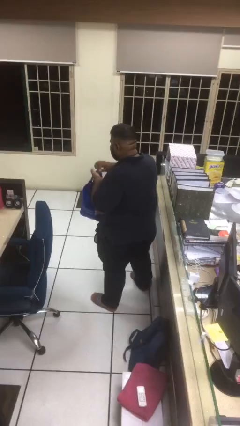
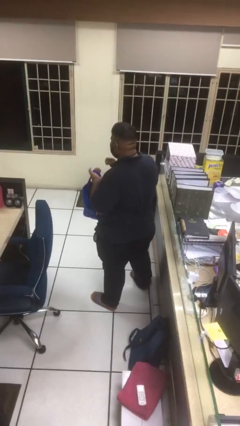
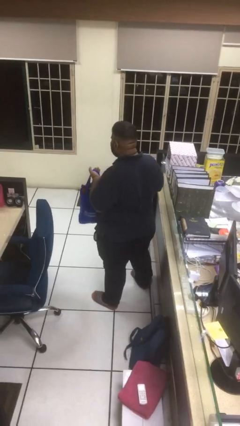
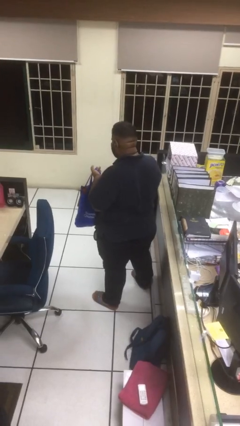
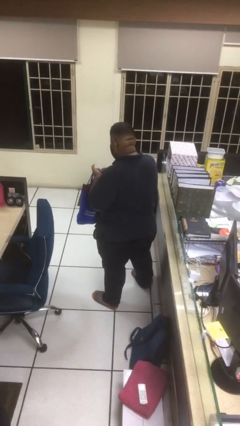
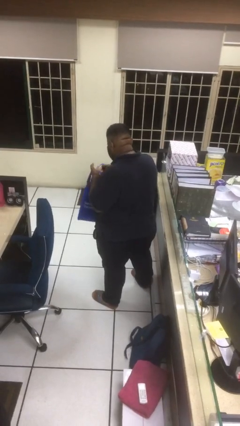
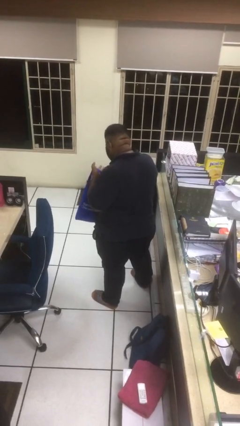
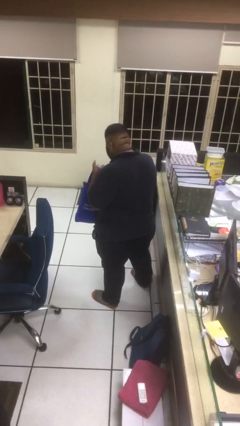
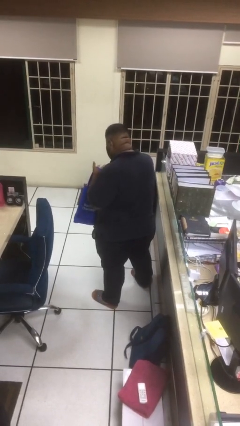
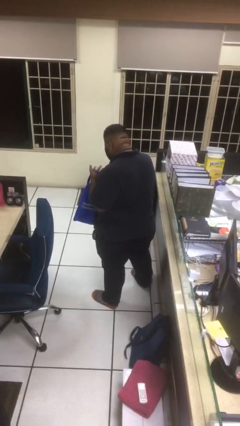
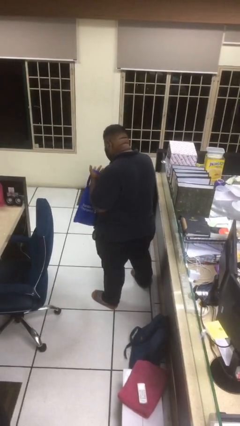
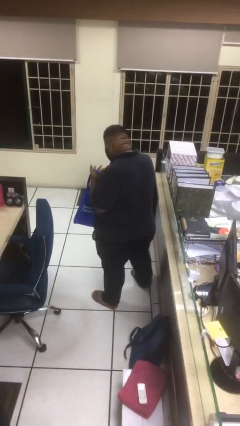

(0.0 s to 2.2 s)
person searches in bag

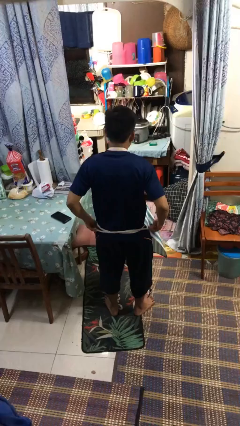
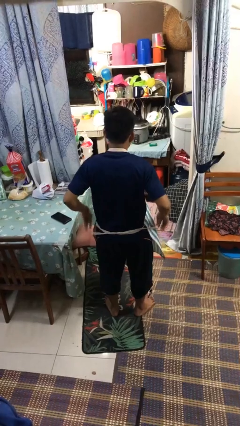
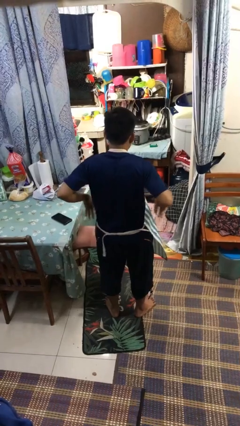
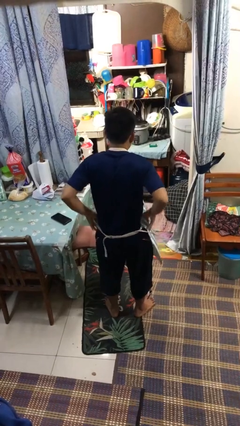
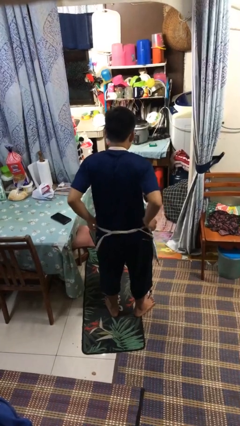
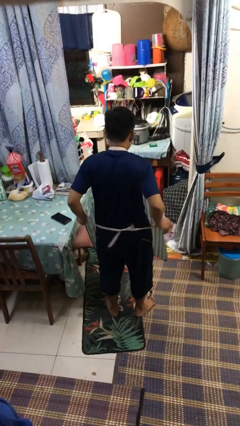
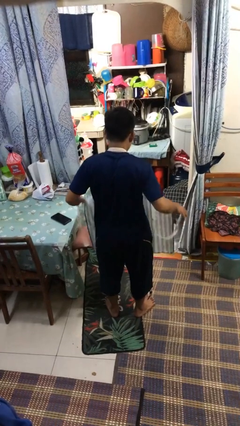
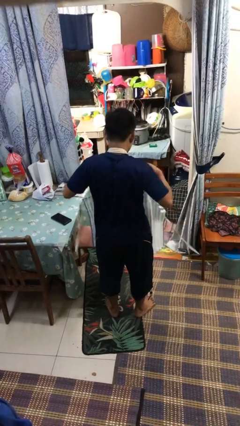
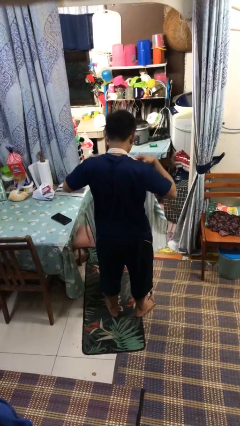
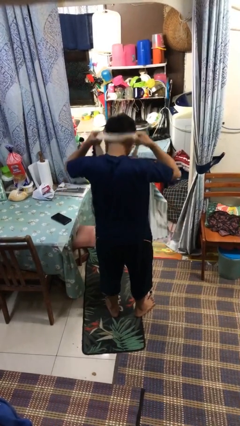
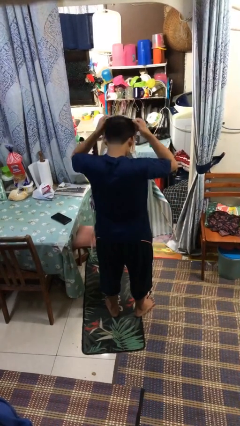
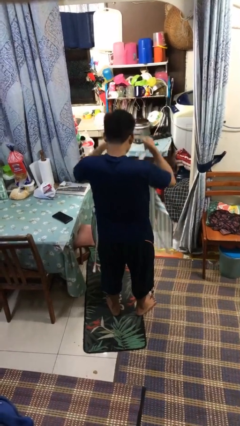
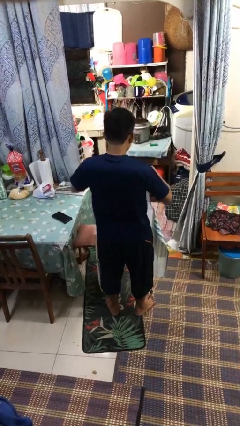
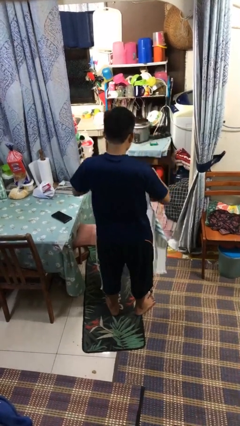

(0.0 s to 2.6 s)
person takes off apron

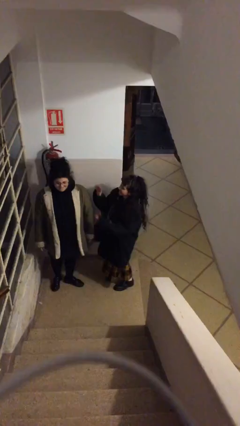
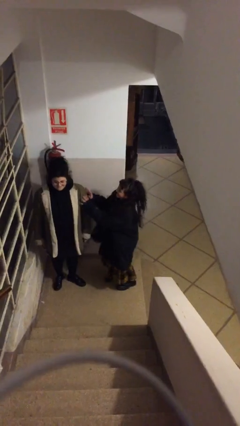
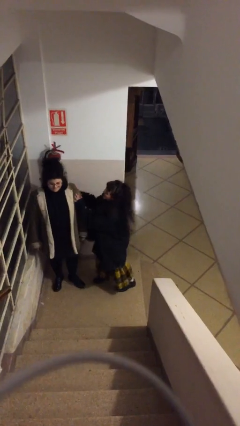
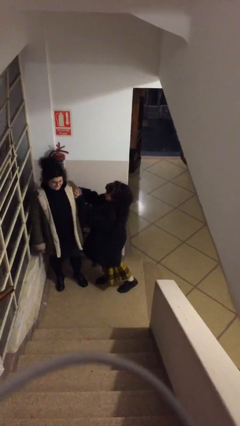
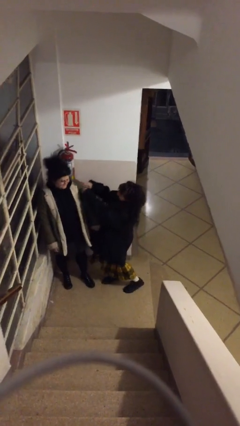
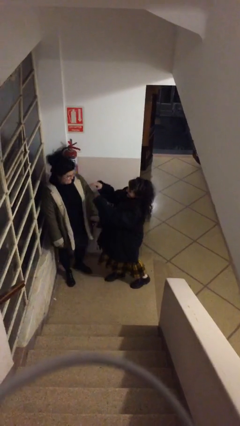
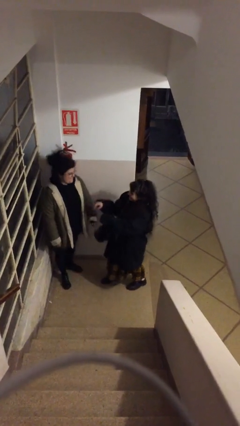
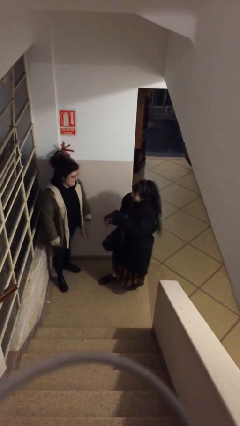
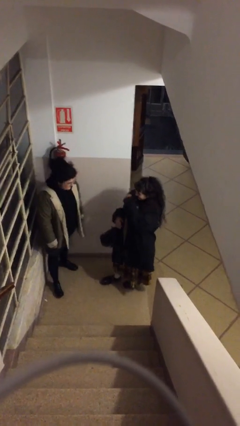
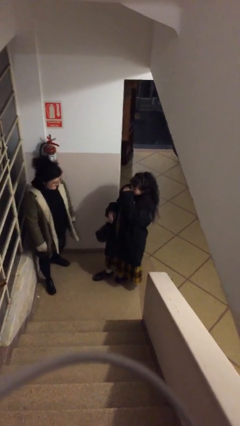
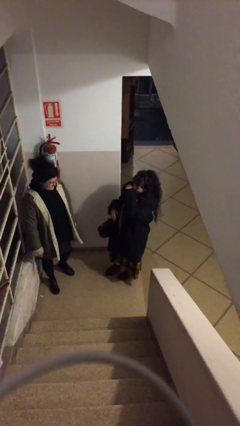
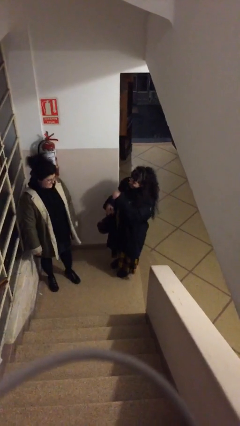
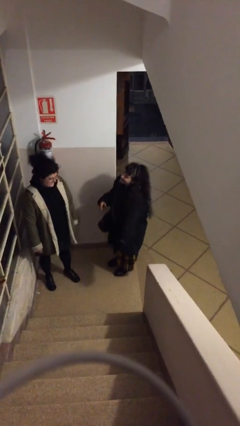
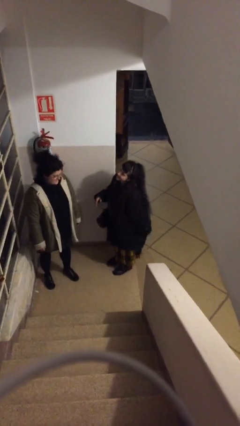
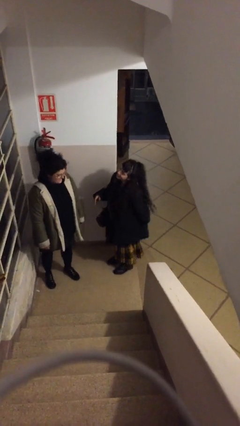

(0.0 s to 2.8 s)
person shoves person

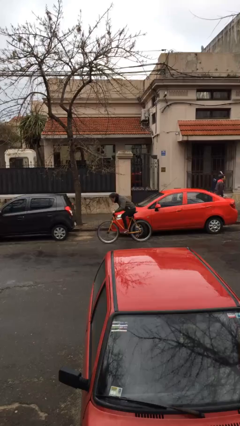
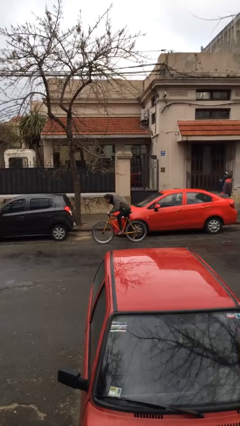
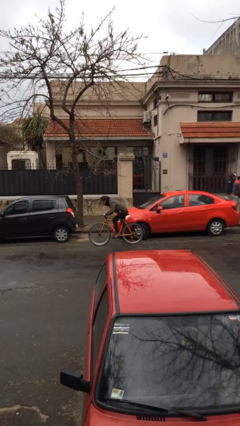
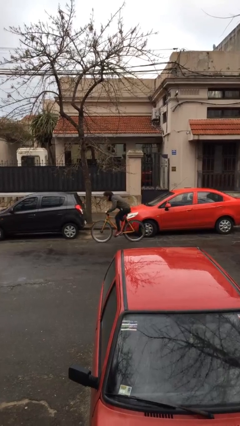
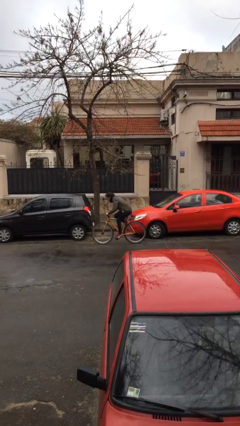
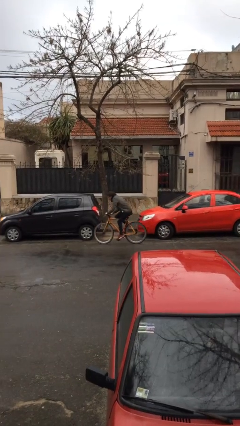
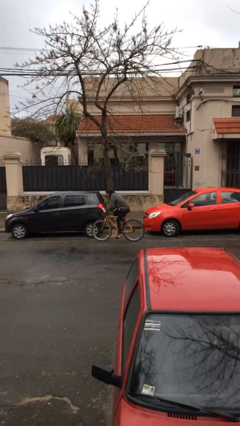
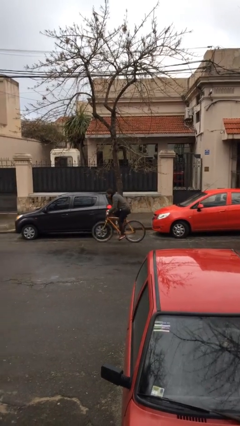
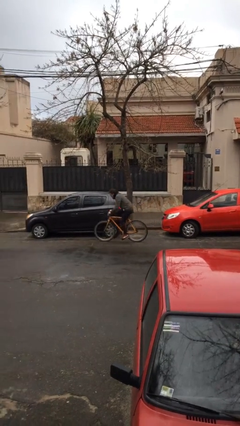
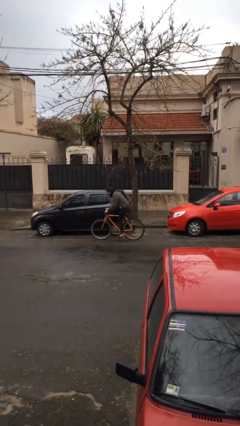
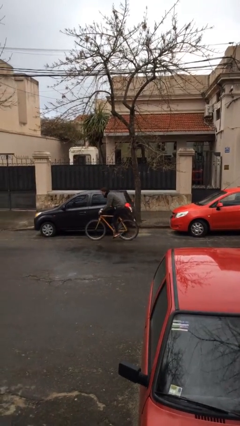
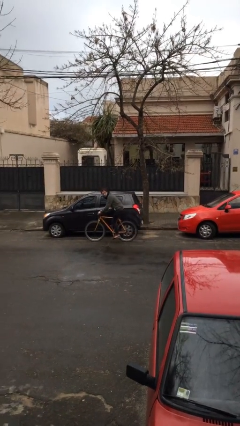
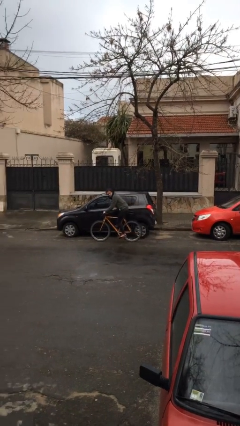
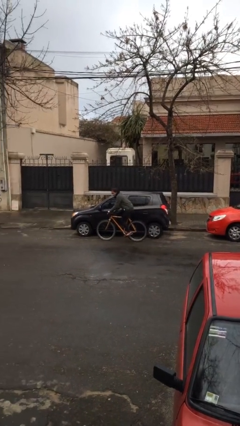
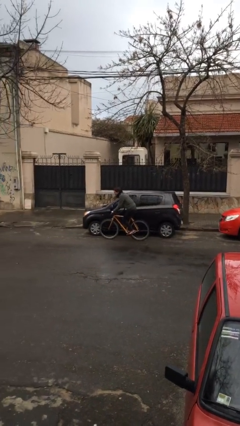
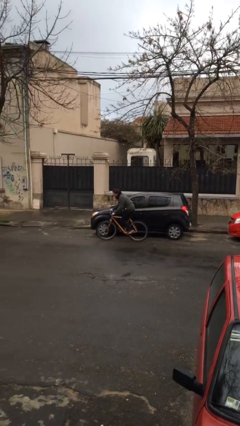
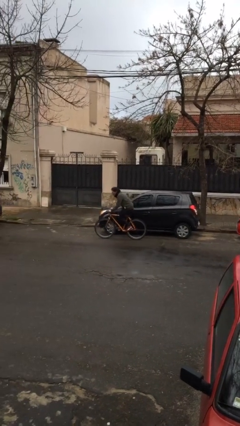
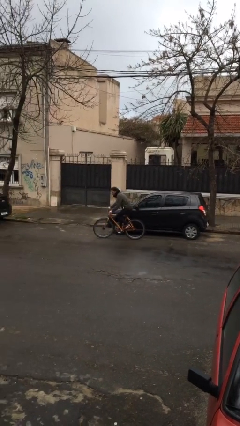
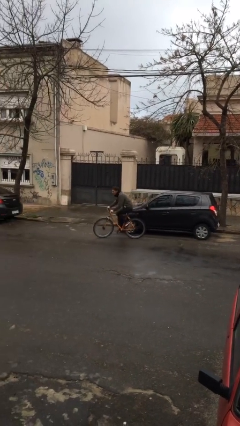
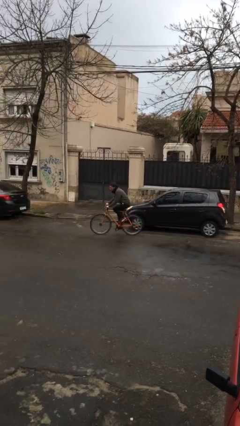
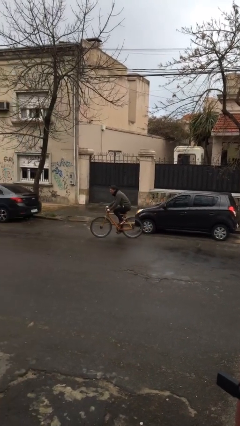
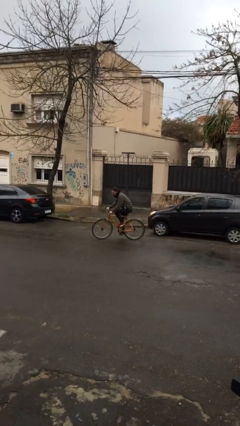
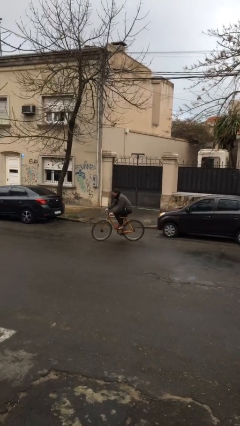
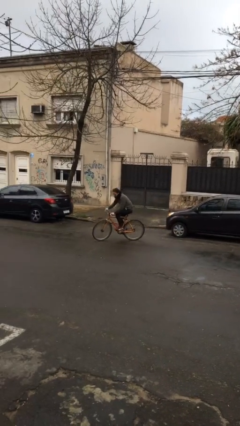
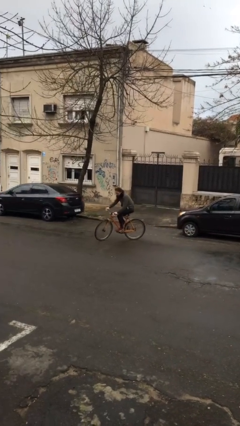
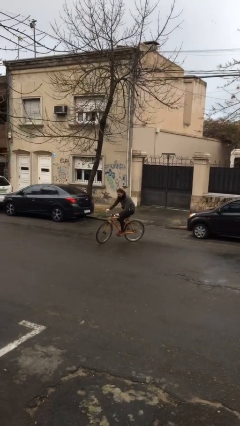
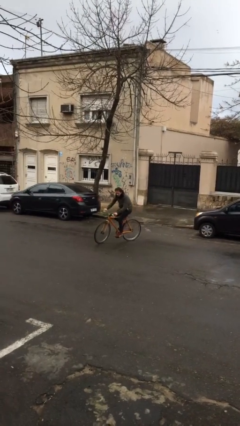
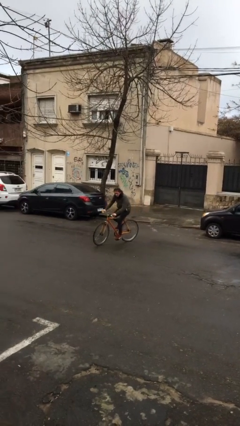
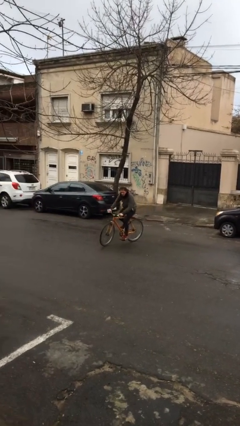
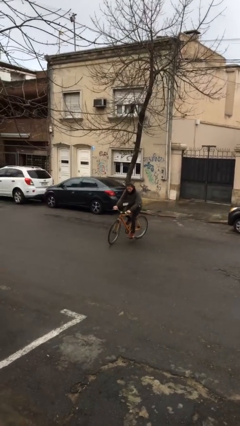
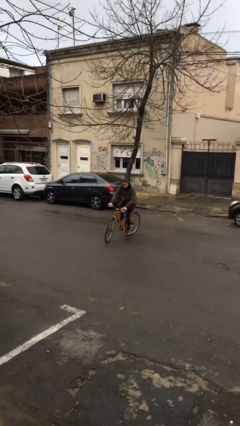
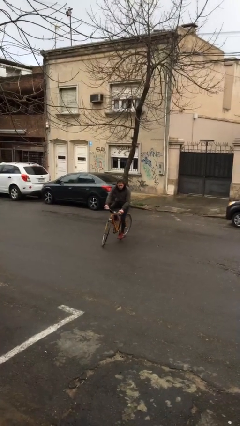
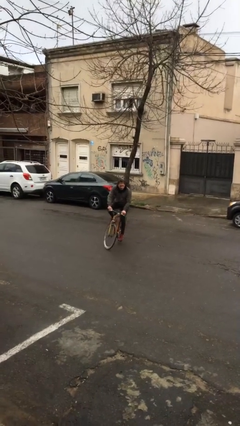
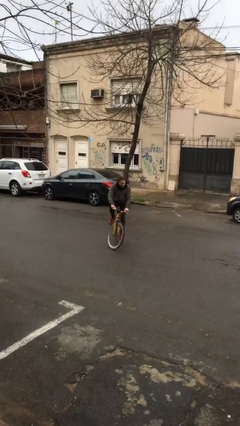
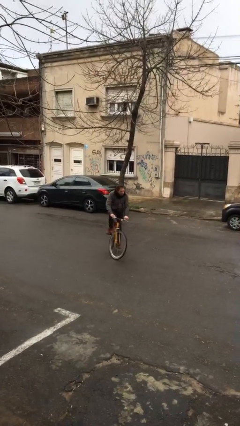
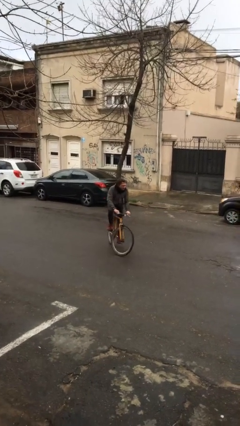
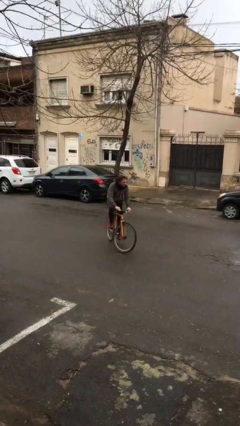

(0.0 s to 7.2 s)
person rides bicycle

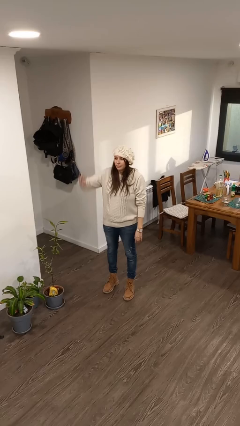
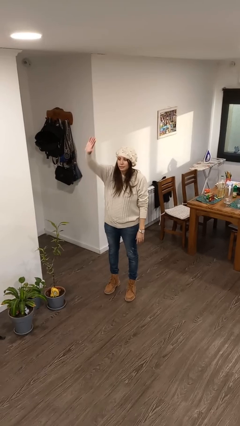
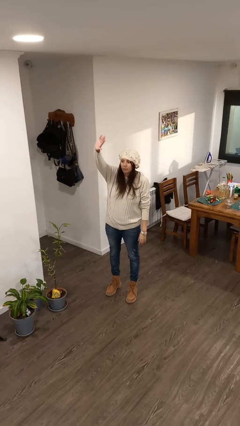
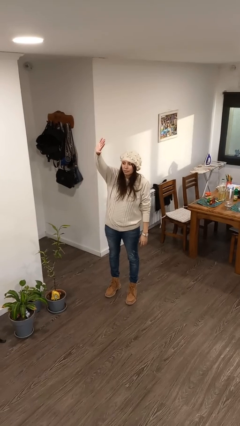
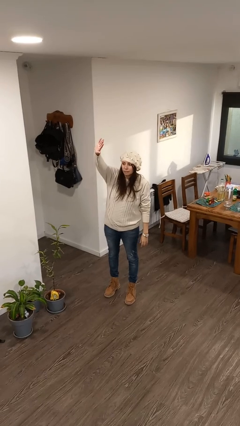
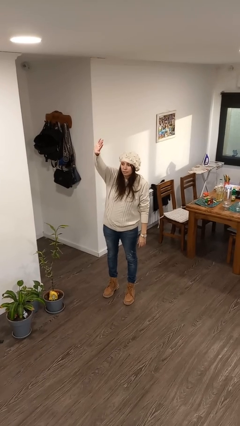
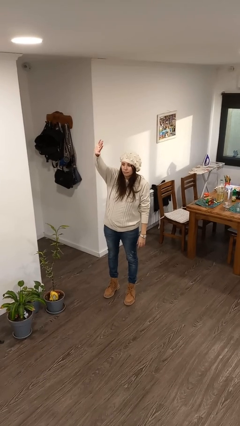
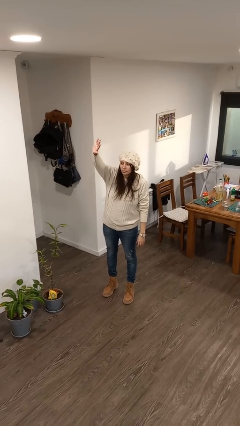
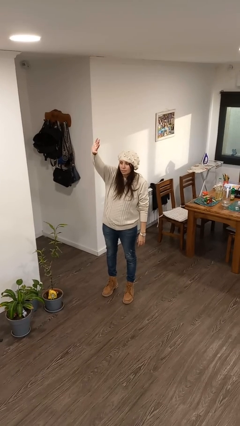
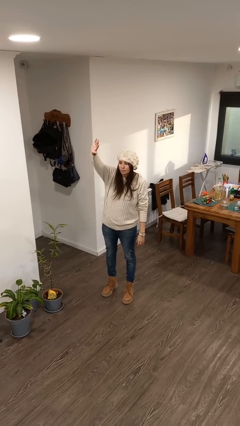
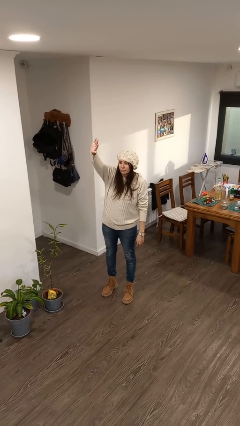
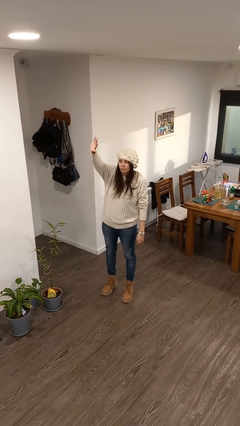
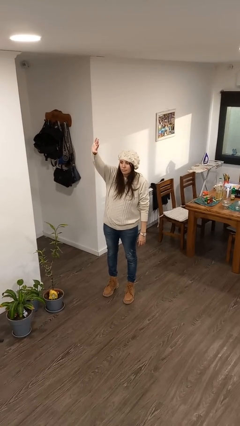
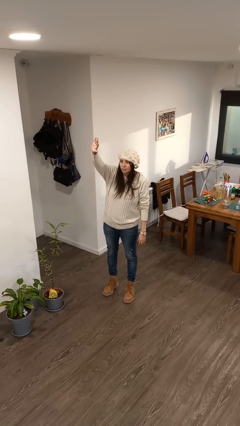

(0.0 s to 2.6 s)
person gestures raise hand

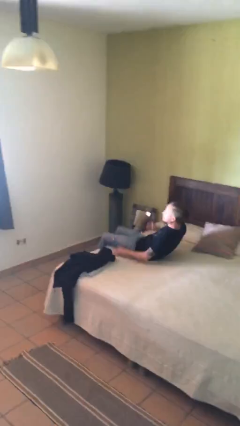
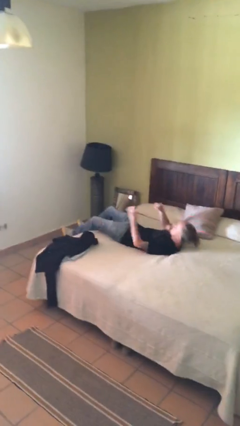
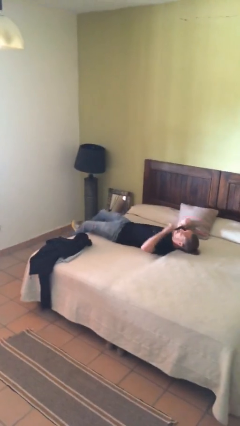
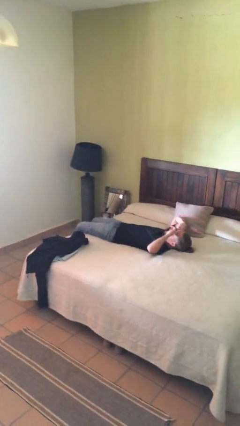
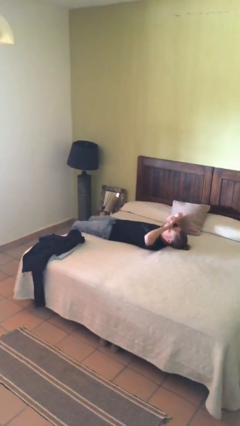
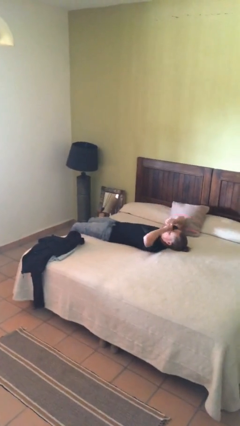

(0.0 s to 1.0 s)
person lies down on bed
